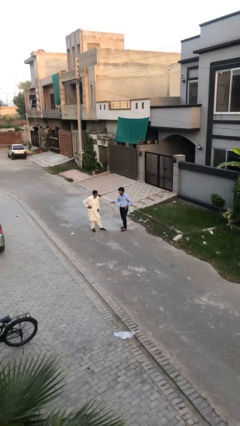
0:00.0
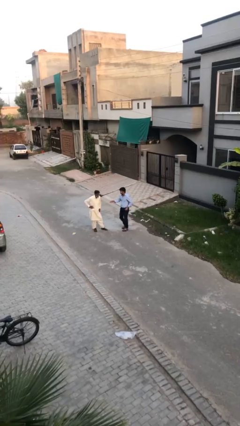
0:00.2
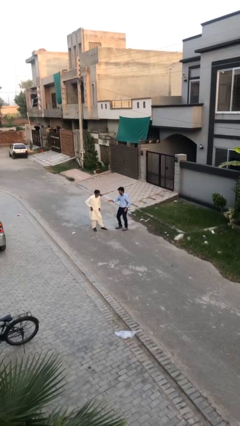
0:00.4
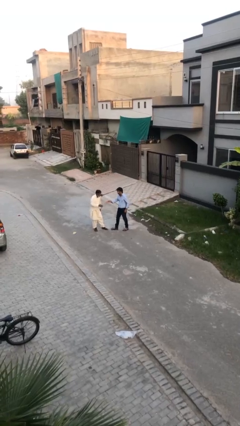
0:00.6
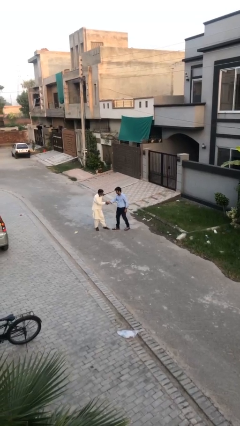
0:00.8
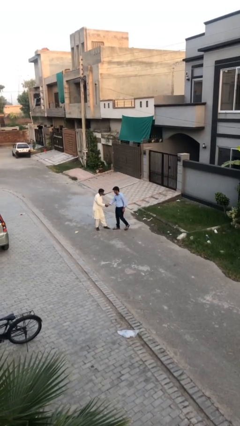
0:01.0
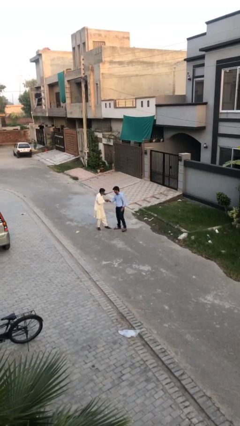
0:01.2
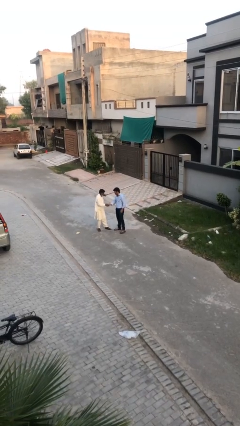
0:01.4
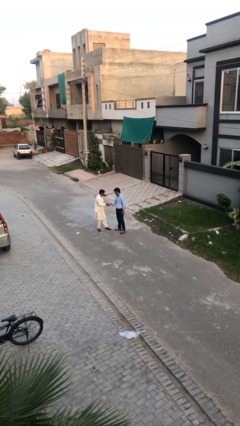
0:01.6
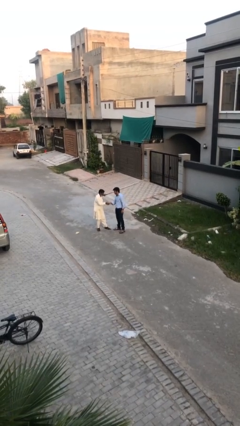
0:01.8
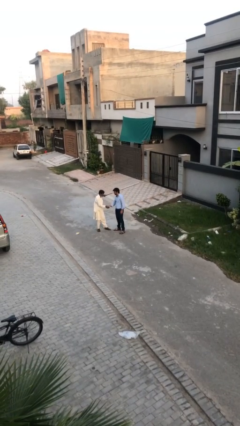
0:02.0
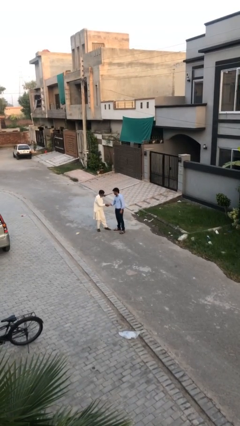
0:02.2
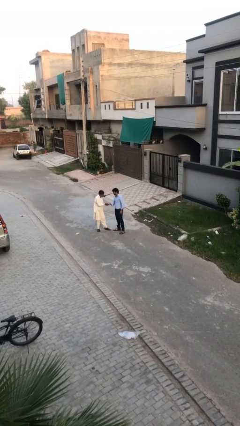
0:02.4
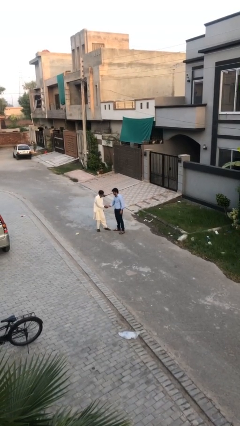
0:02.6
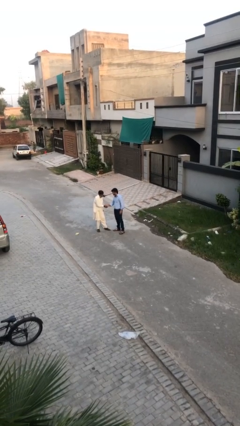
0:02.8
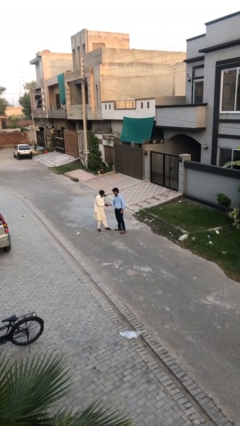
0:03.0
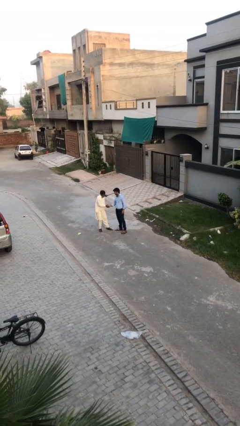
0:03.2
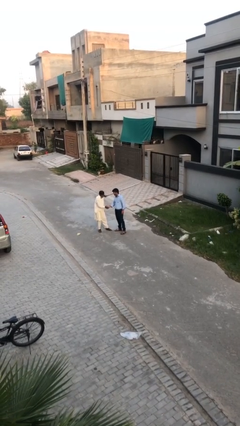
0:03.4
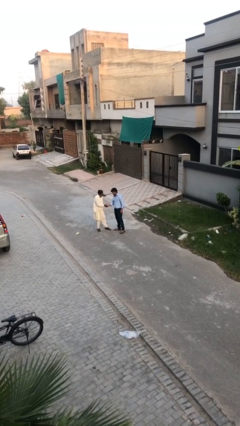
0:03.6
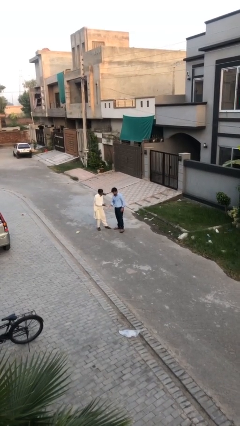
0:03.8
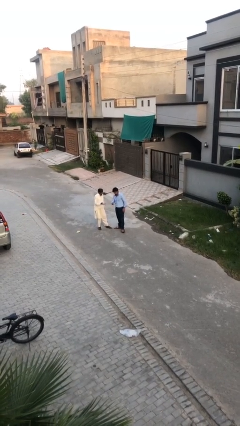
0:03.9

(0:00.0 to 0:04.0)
person shakes hand

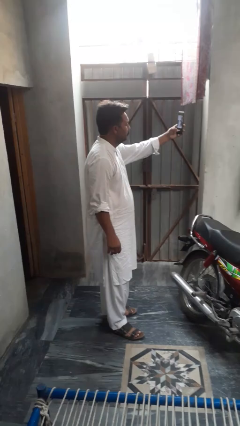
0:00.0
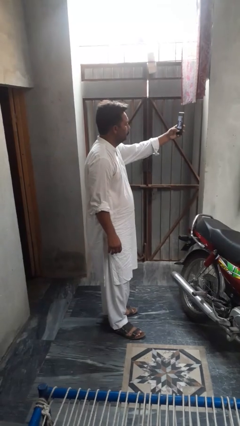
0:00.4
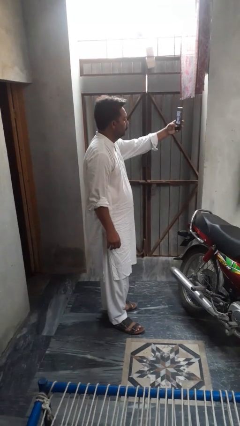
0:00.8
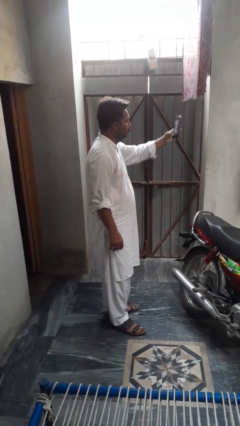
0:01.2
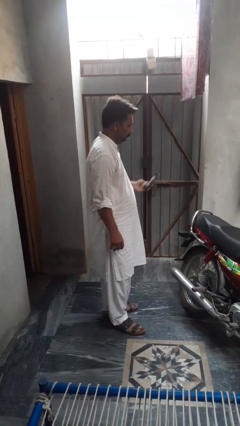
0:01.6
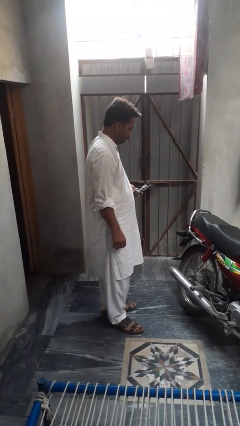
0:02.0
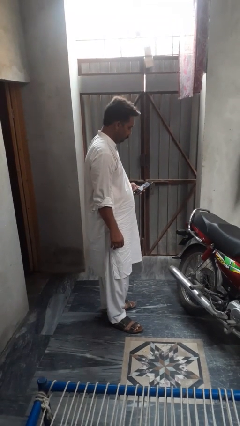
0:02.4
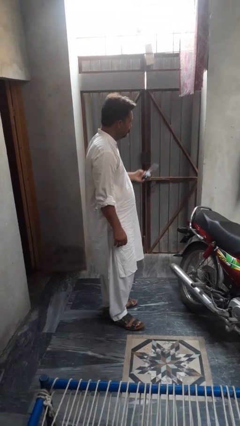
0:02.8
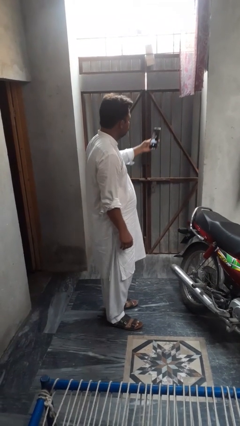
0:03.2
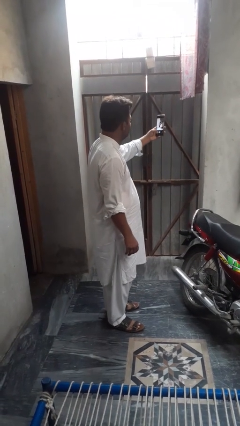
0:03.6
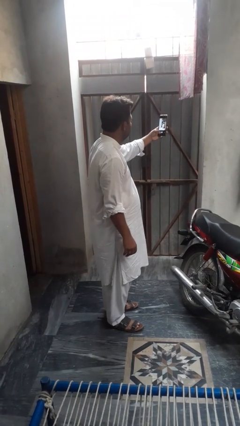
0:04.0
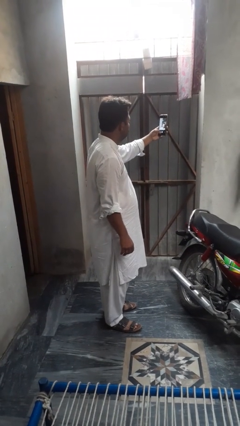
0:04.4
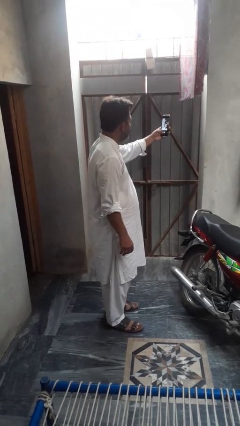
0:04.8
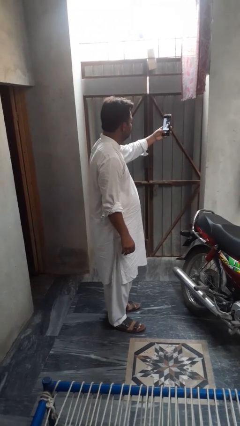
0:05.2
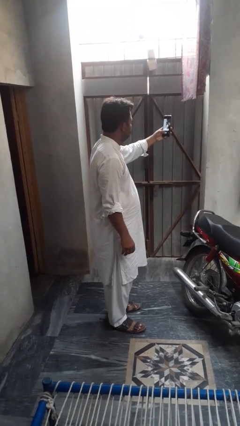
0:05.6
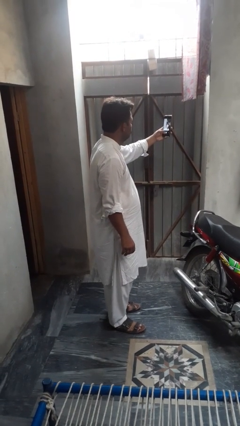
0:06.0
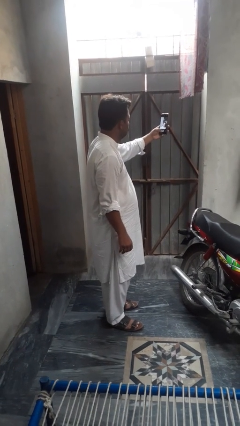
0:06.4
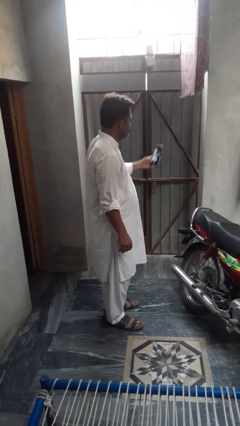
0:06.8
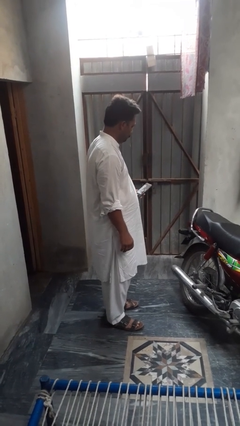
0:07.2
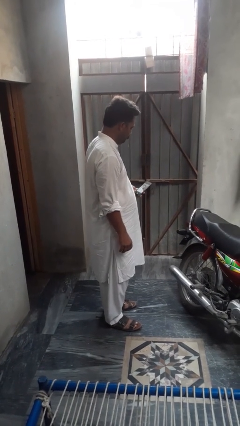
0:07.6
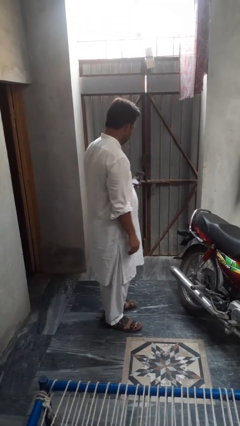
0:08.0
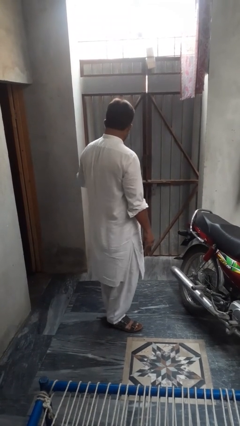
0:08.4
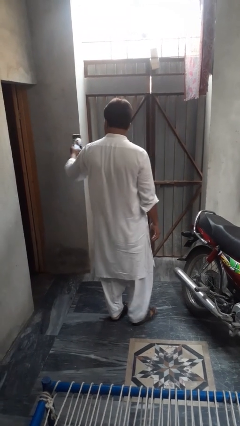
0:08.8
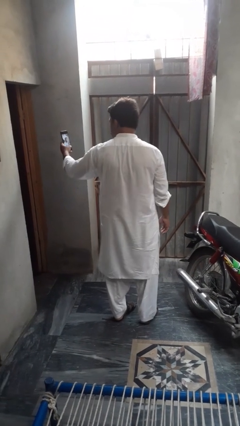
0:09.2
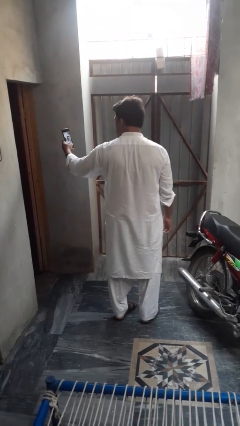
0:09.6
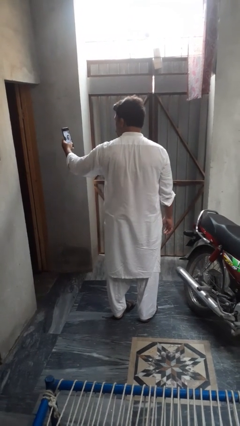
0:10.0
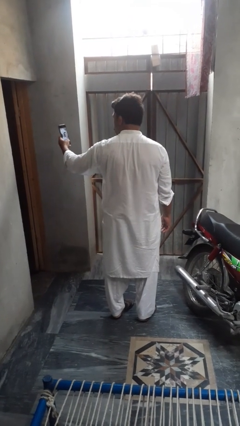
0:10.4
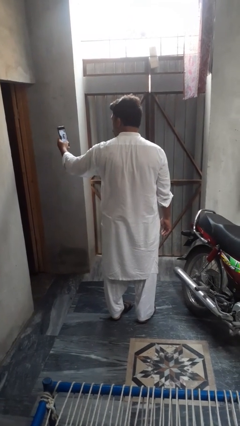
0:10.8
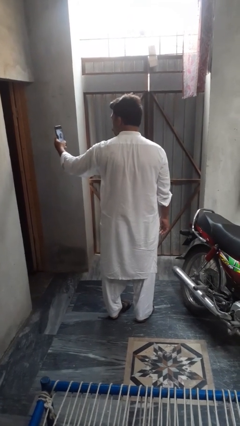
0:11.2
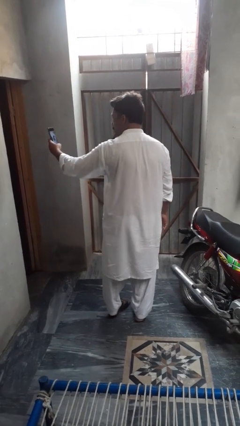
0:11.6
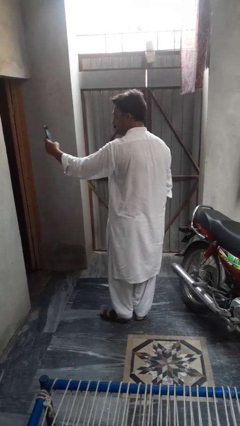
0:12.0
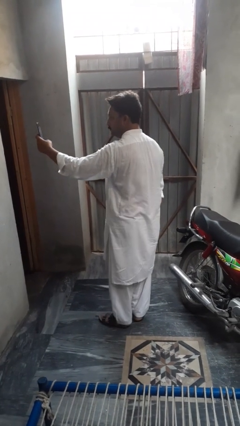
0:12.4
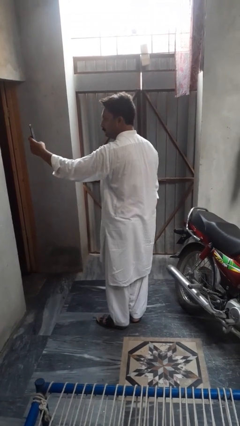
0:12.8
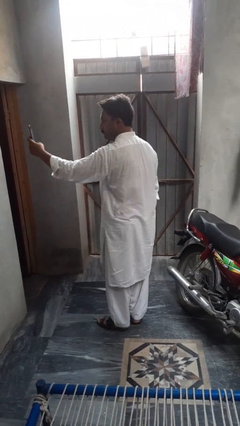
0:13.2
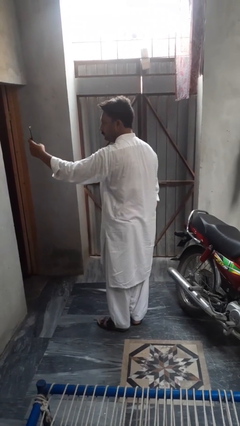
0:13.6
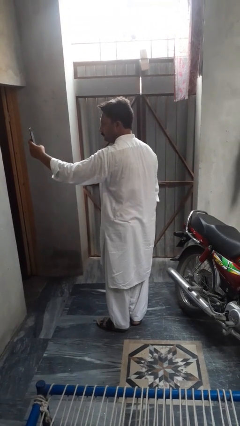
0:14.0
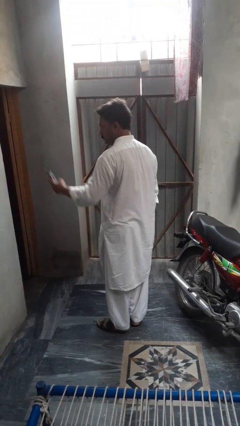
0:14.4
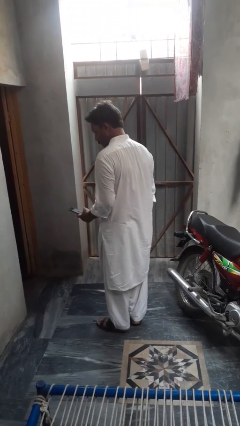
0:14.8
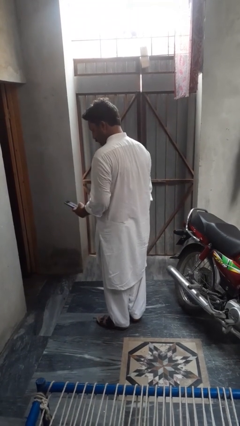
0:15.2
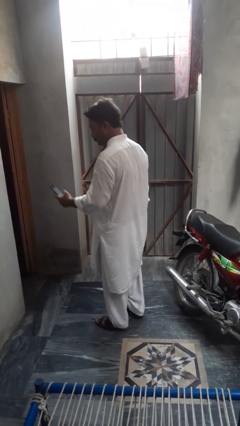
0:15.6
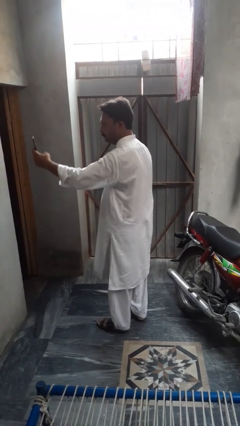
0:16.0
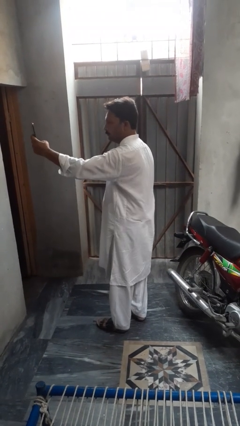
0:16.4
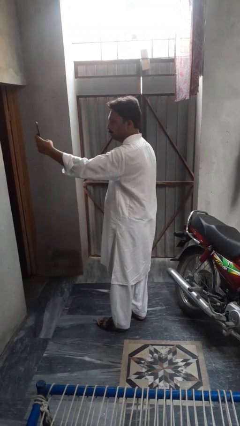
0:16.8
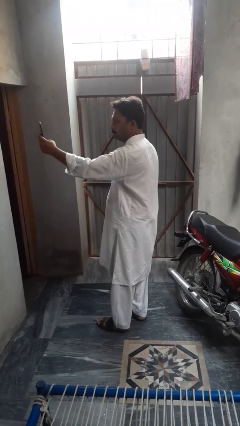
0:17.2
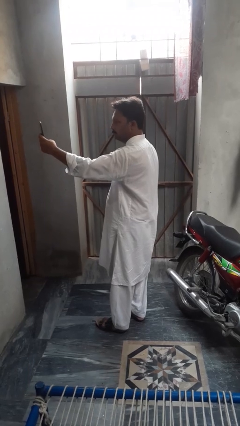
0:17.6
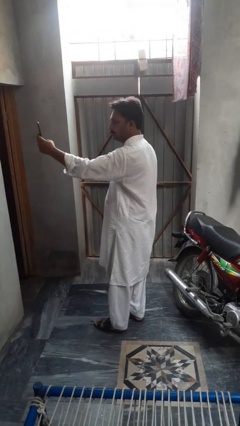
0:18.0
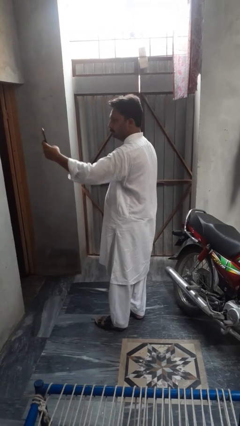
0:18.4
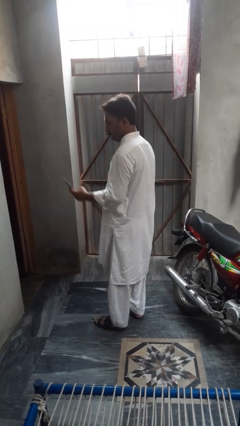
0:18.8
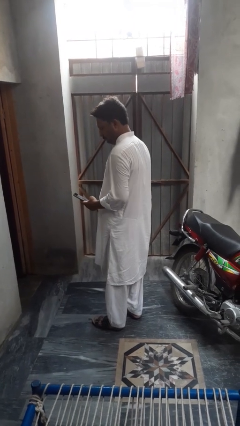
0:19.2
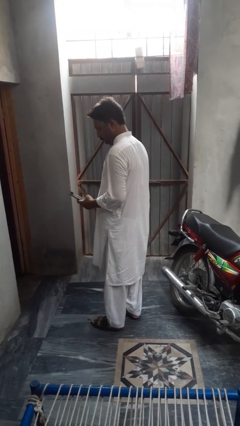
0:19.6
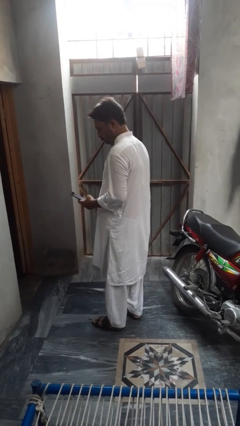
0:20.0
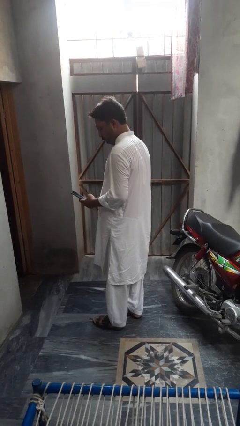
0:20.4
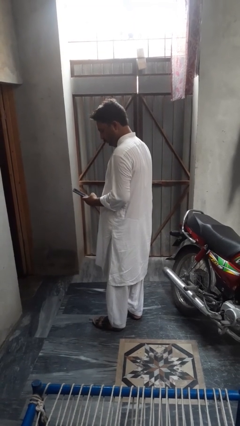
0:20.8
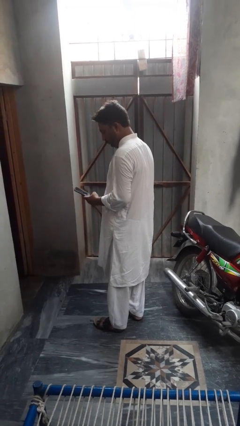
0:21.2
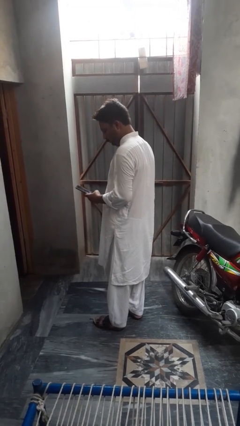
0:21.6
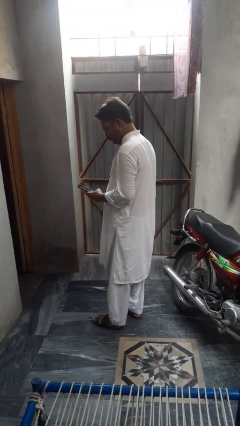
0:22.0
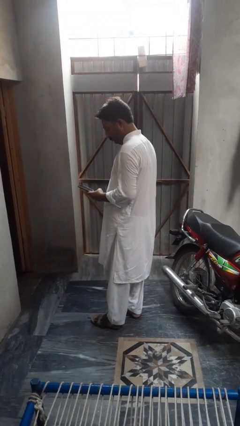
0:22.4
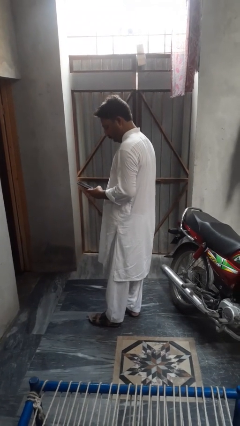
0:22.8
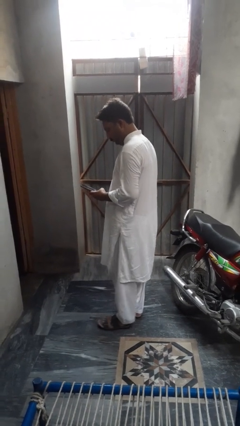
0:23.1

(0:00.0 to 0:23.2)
person takes selfie

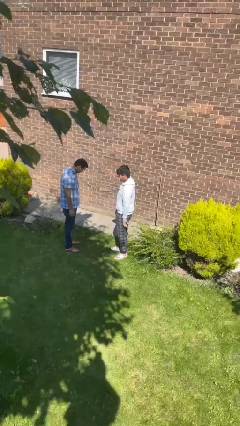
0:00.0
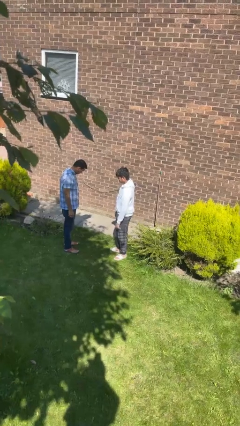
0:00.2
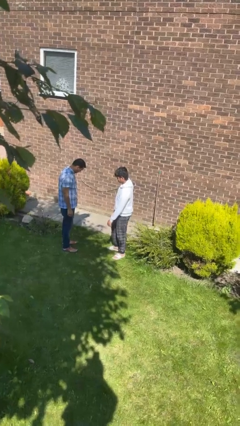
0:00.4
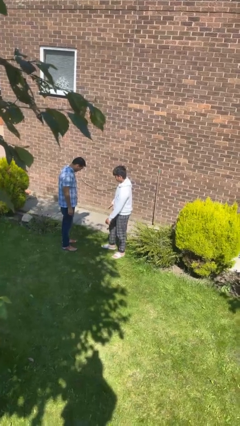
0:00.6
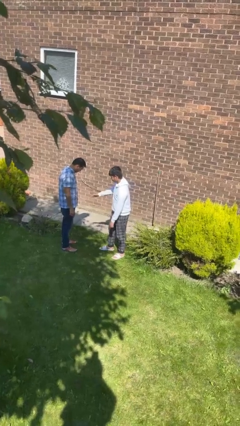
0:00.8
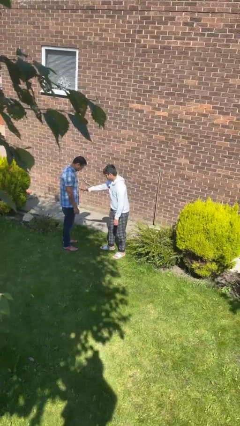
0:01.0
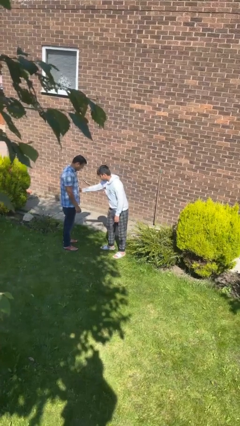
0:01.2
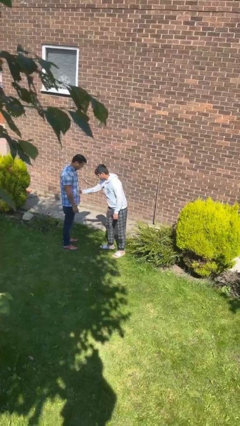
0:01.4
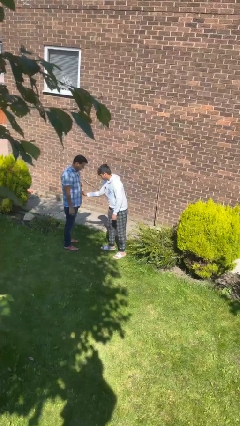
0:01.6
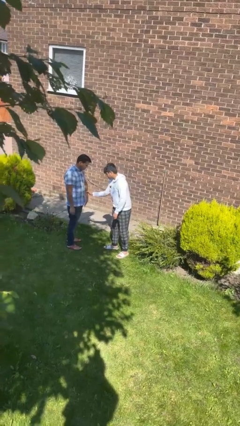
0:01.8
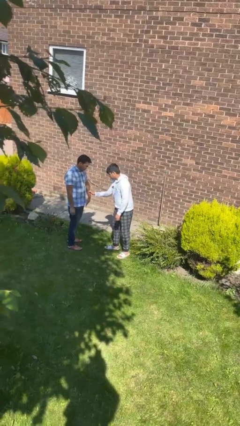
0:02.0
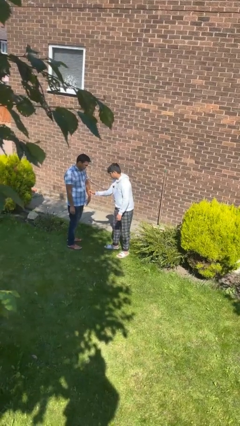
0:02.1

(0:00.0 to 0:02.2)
person grabs person by forearm
